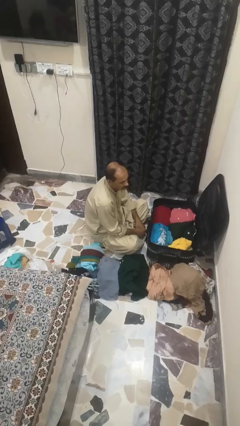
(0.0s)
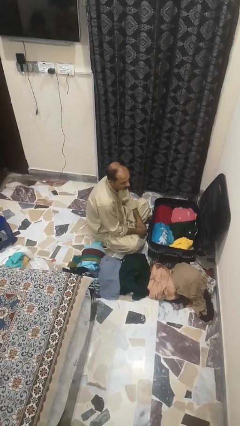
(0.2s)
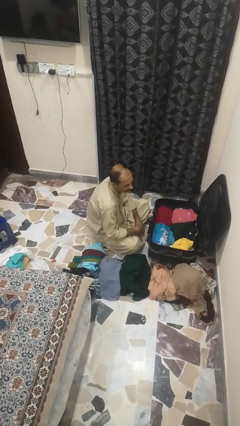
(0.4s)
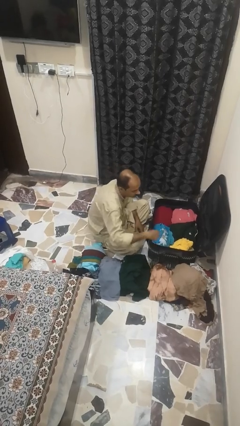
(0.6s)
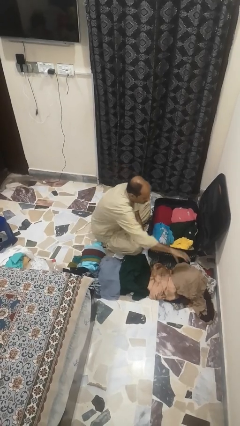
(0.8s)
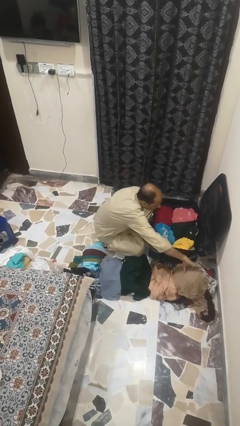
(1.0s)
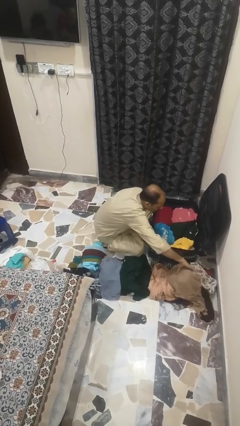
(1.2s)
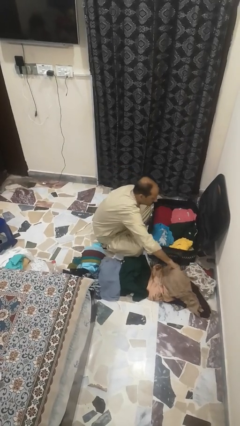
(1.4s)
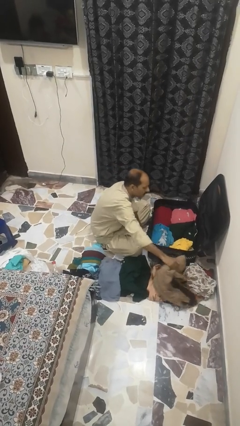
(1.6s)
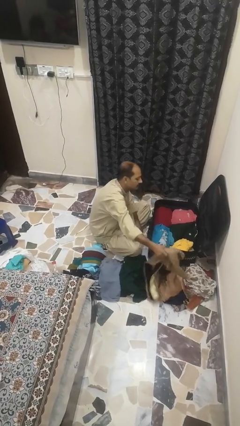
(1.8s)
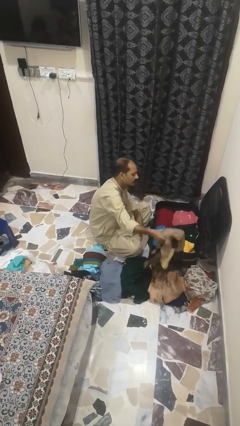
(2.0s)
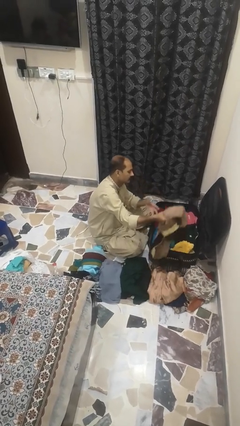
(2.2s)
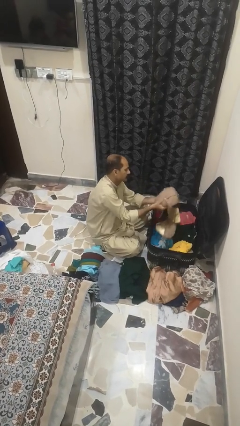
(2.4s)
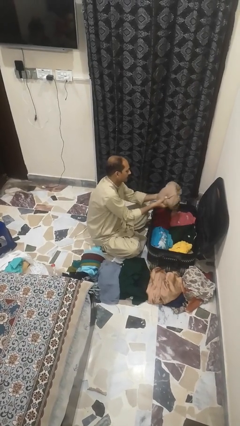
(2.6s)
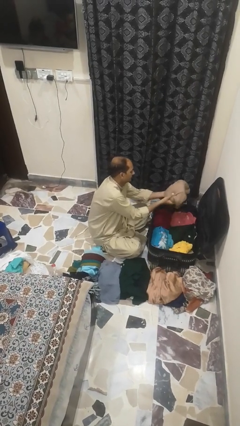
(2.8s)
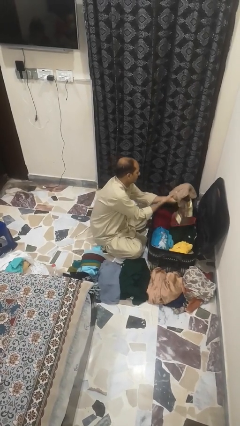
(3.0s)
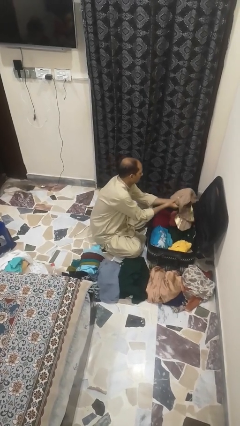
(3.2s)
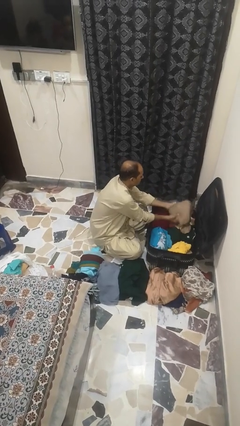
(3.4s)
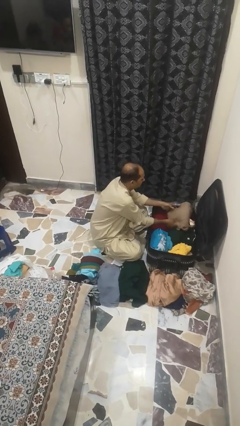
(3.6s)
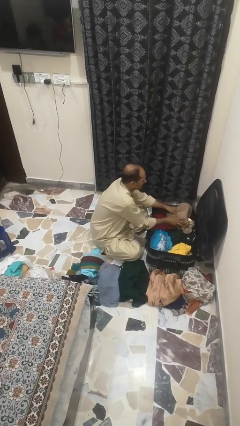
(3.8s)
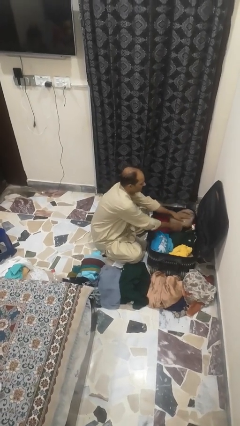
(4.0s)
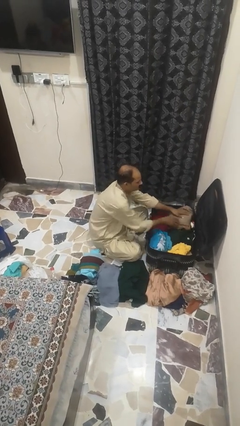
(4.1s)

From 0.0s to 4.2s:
person loads clothes into suitcase

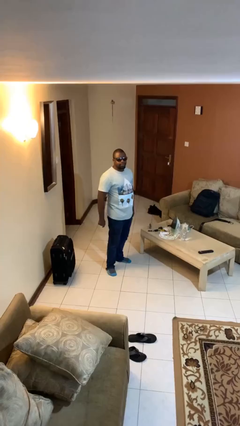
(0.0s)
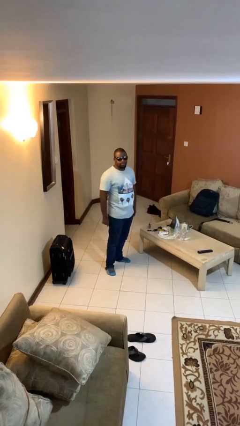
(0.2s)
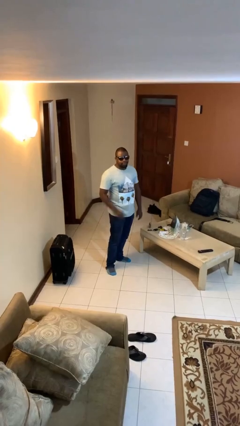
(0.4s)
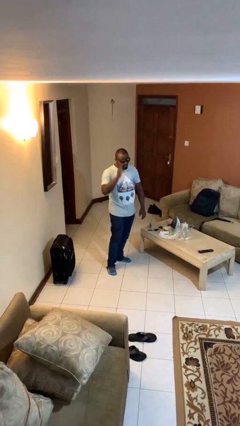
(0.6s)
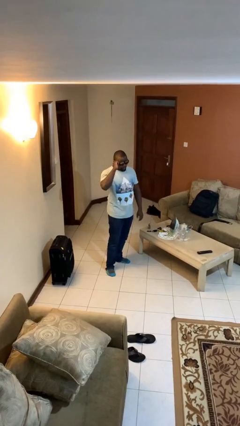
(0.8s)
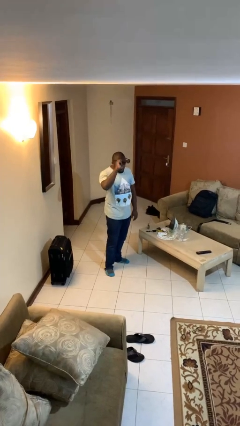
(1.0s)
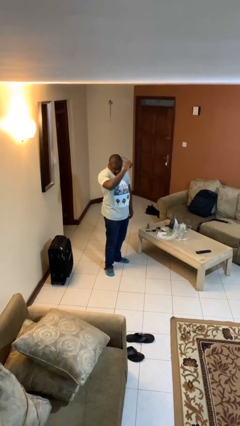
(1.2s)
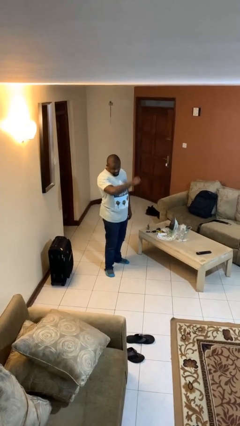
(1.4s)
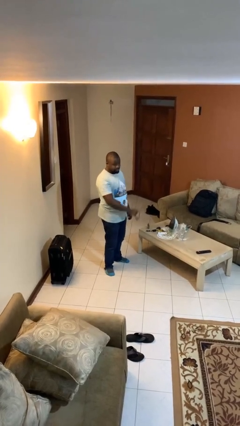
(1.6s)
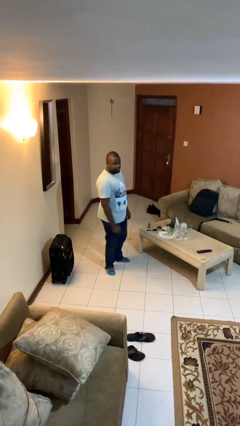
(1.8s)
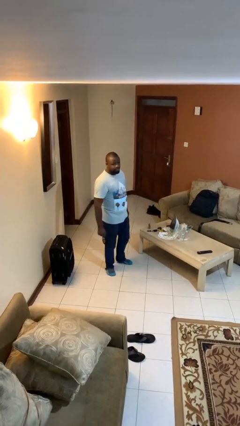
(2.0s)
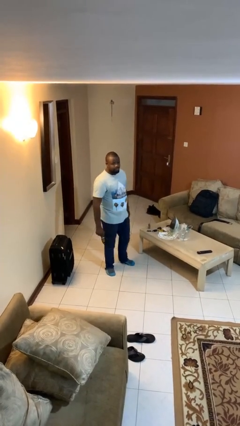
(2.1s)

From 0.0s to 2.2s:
person takes off sunglasses

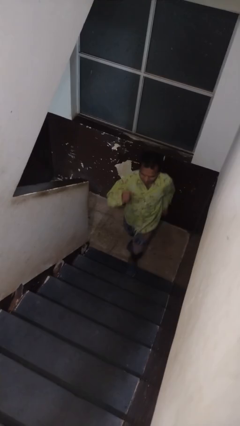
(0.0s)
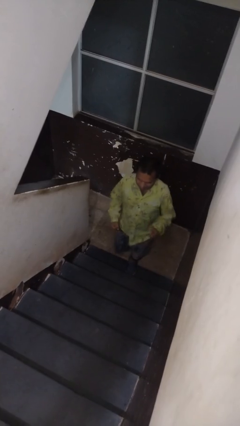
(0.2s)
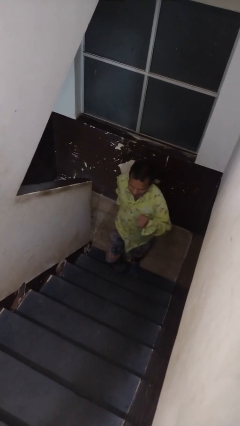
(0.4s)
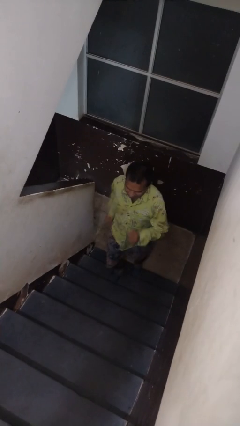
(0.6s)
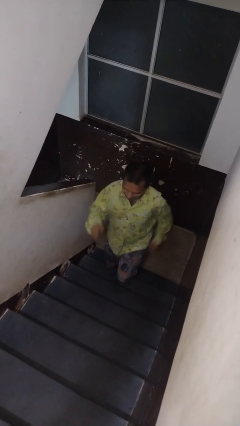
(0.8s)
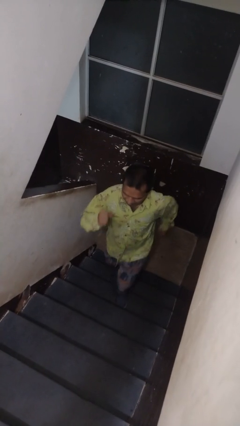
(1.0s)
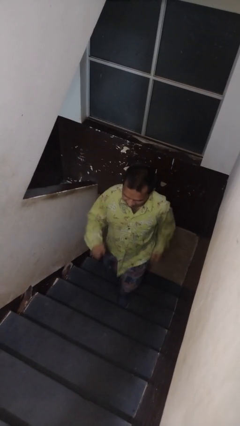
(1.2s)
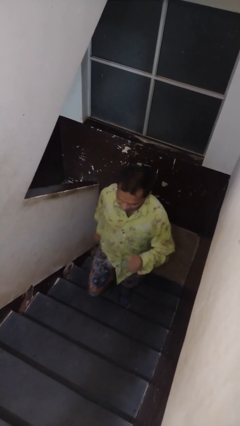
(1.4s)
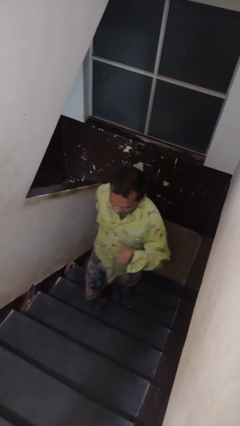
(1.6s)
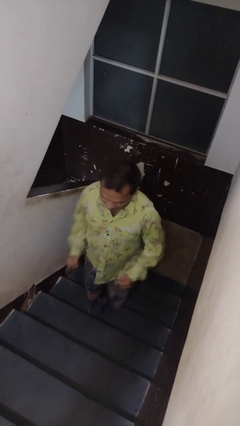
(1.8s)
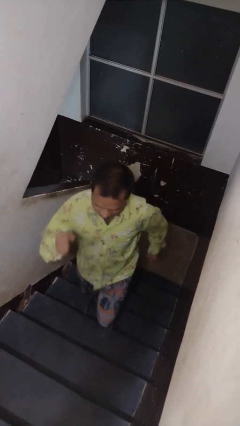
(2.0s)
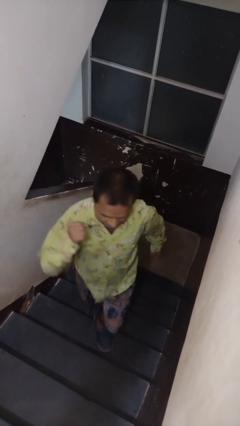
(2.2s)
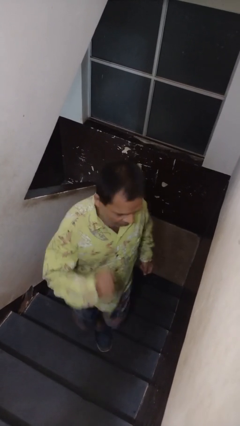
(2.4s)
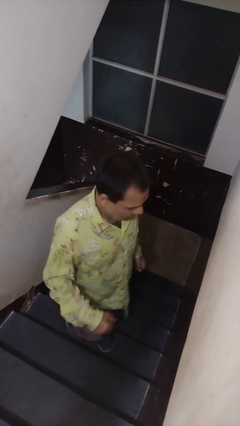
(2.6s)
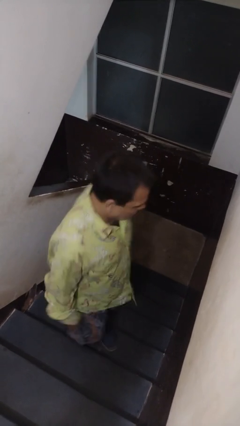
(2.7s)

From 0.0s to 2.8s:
person climbs up stairs

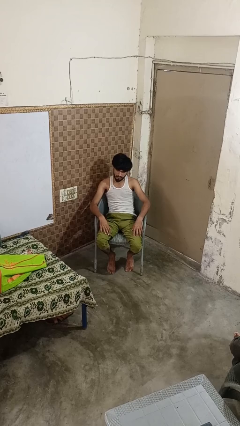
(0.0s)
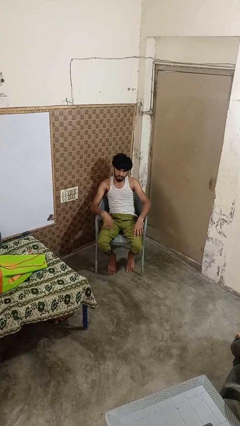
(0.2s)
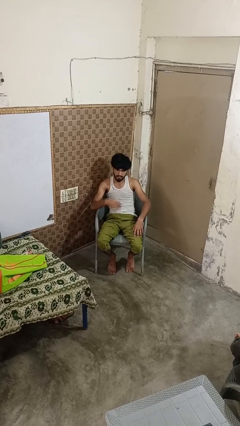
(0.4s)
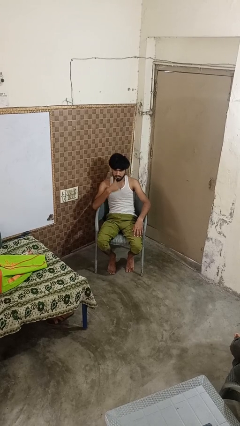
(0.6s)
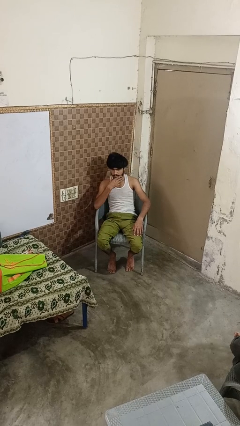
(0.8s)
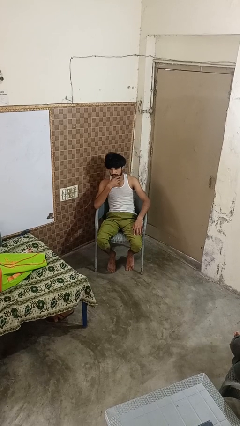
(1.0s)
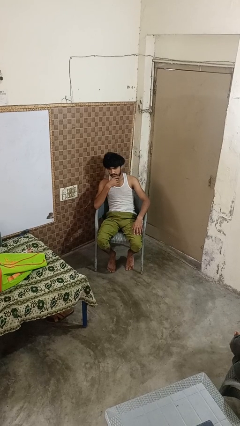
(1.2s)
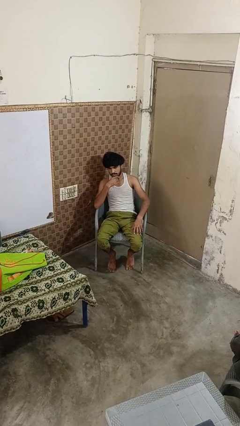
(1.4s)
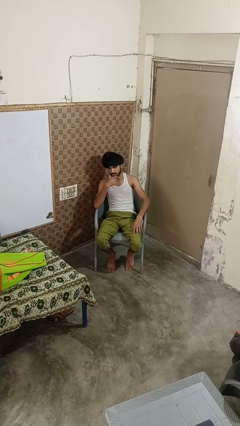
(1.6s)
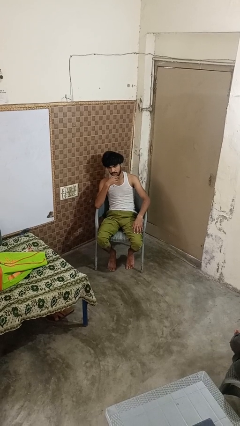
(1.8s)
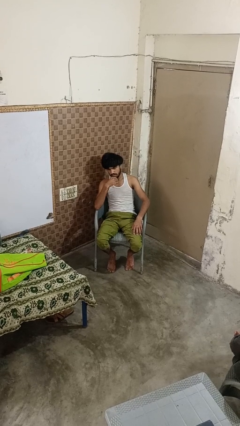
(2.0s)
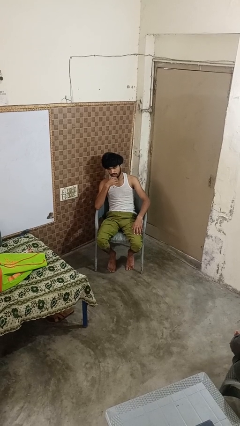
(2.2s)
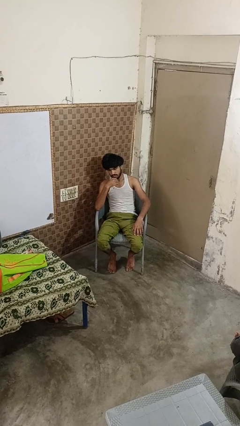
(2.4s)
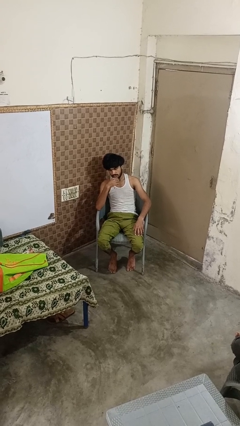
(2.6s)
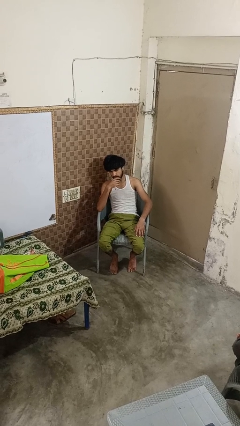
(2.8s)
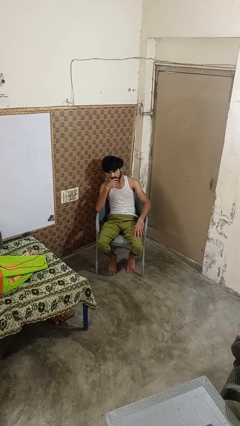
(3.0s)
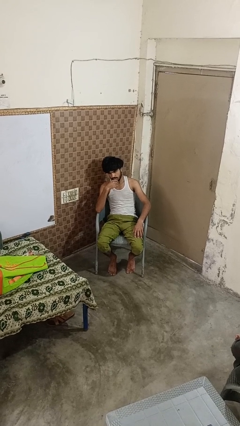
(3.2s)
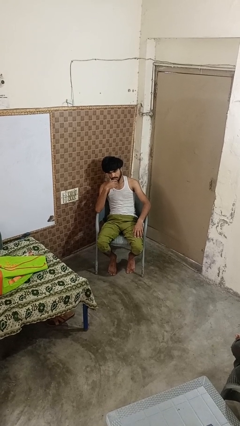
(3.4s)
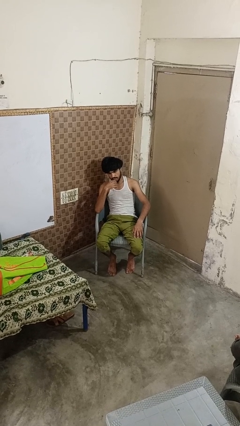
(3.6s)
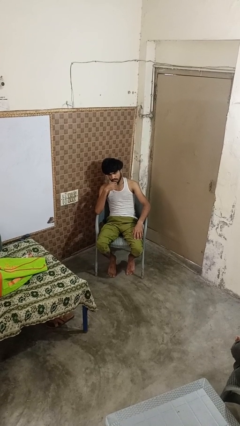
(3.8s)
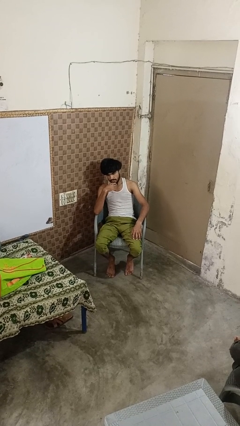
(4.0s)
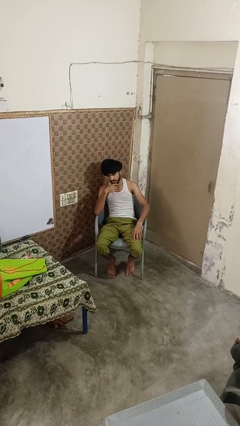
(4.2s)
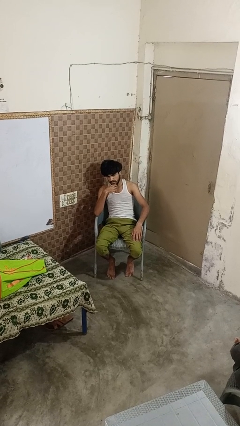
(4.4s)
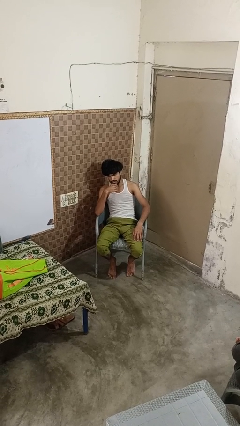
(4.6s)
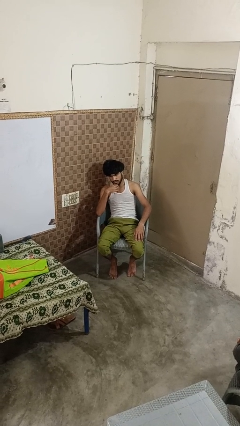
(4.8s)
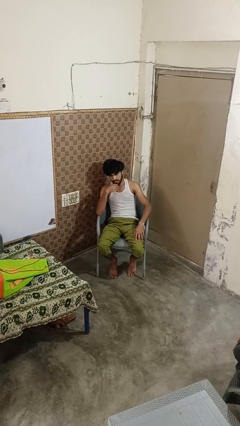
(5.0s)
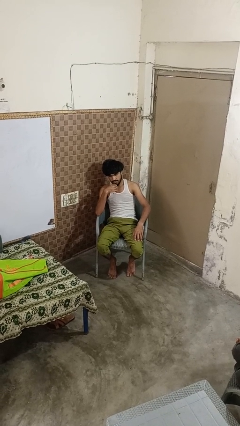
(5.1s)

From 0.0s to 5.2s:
person strokes chin

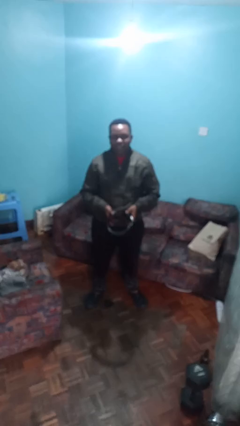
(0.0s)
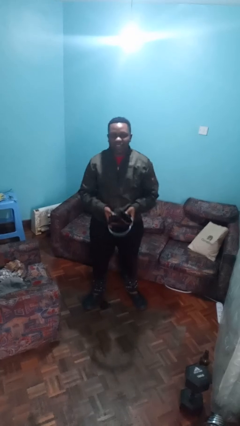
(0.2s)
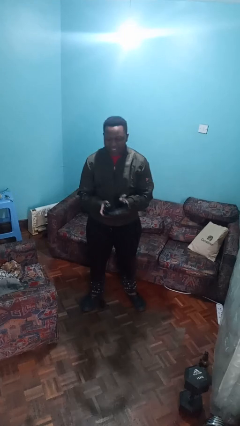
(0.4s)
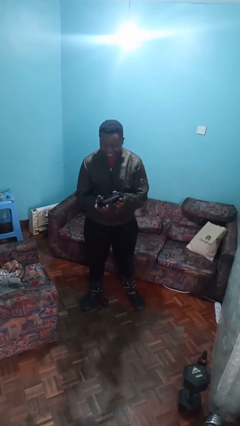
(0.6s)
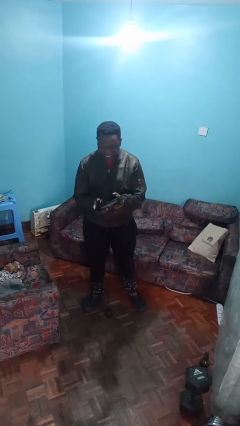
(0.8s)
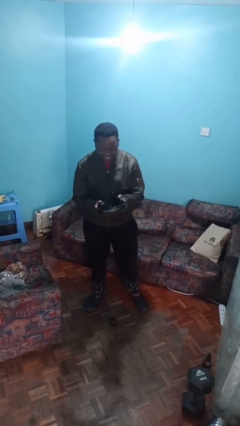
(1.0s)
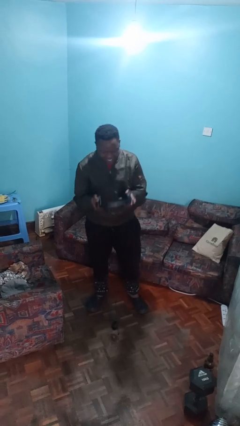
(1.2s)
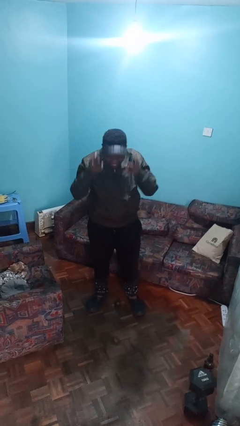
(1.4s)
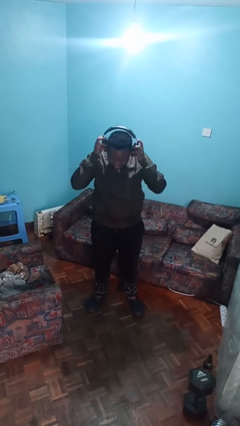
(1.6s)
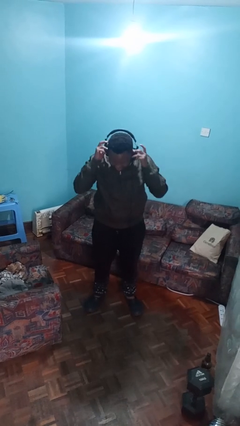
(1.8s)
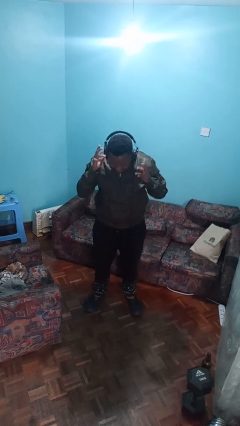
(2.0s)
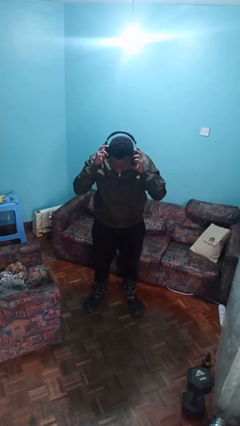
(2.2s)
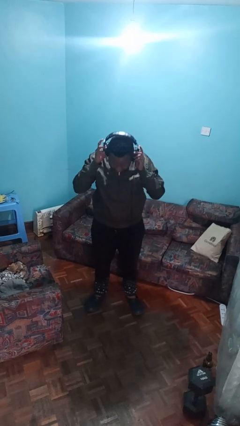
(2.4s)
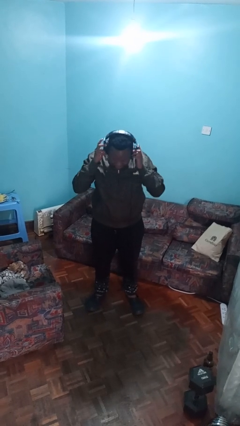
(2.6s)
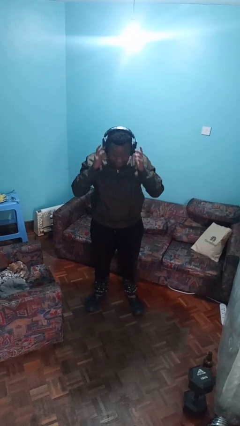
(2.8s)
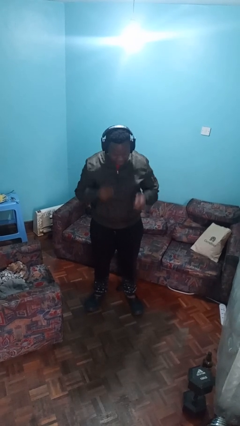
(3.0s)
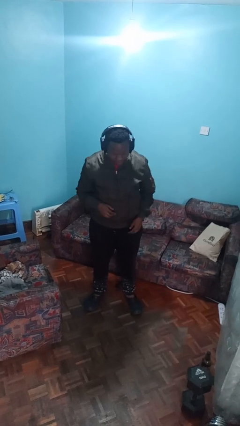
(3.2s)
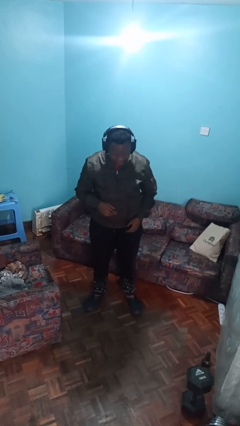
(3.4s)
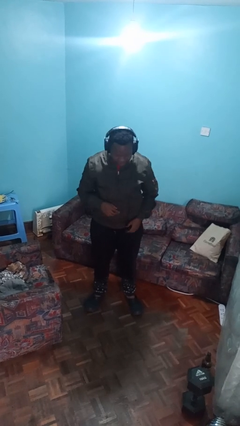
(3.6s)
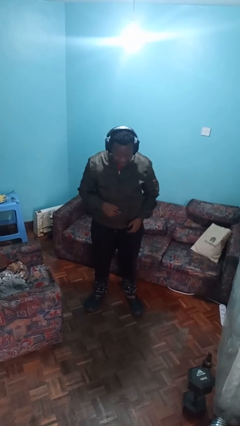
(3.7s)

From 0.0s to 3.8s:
person puts on headphones
